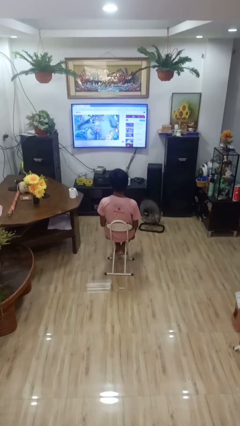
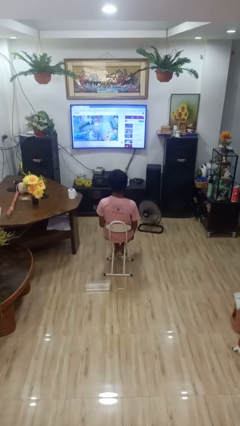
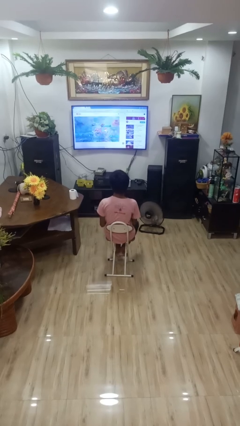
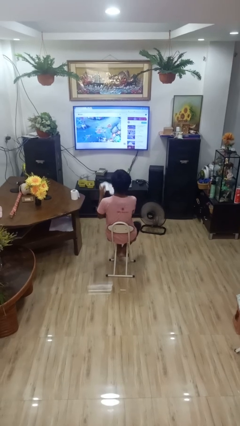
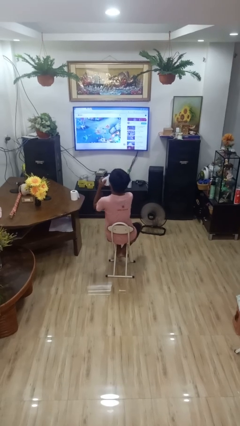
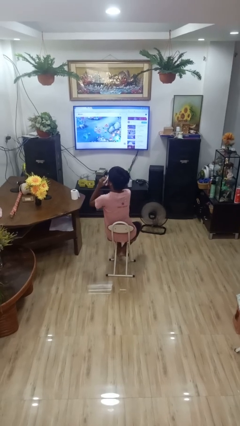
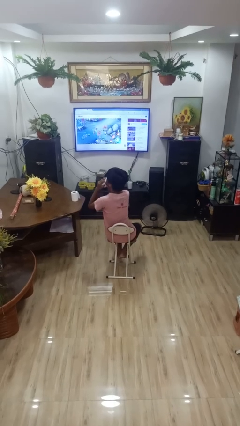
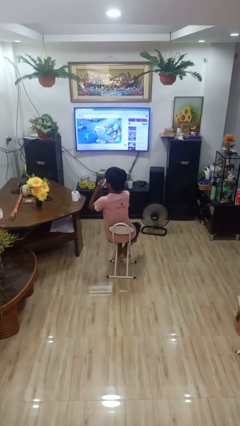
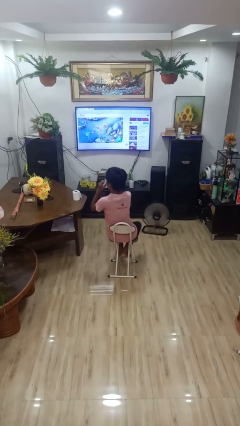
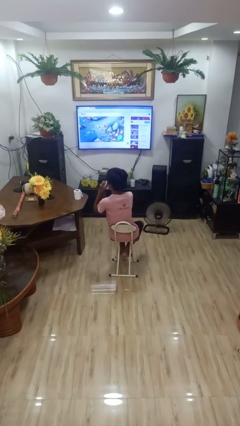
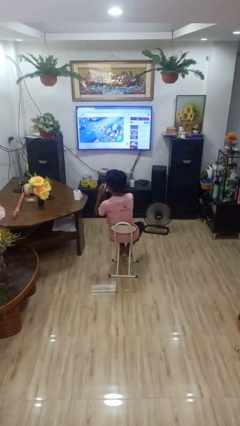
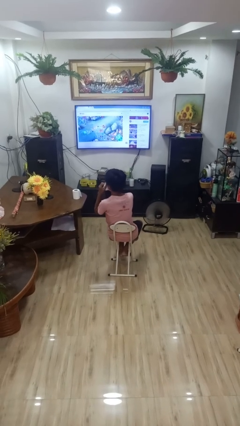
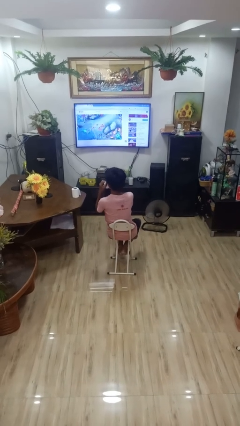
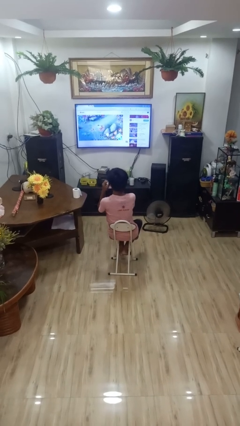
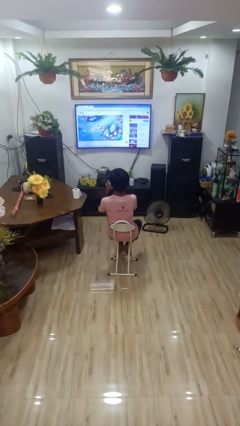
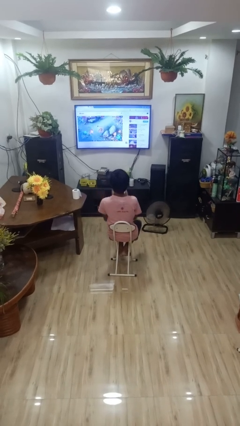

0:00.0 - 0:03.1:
person blows nose

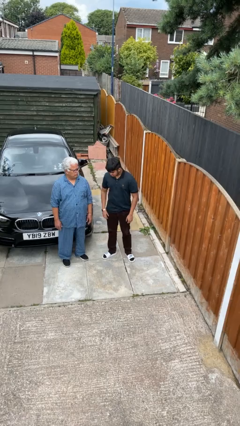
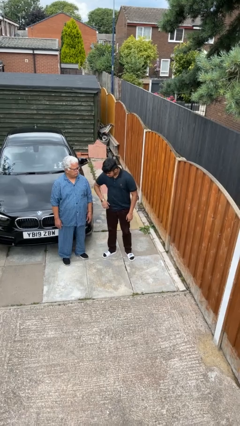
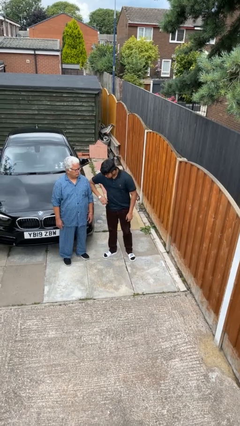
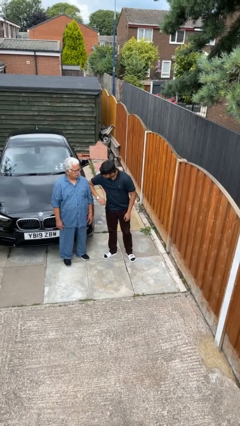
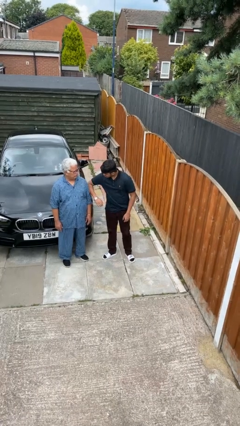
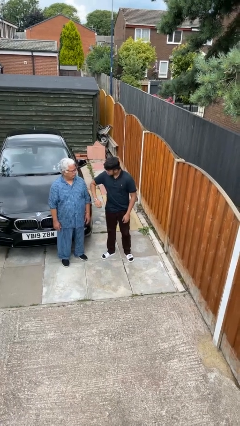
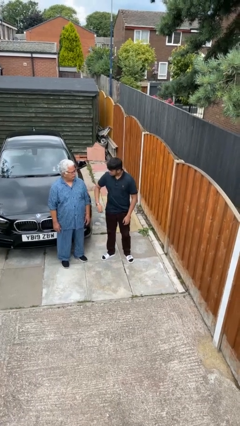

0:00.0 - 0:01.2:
person nudges person with elbow

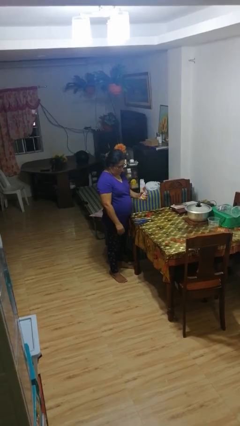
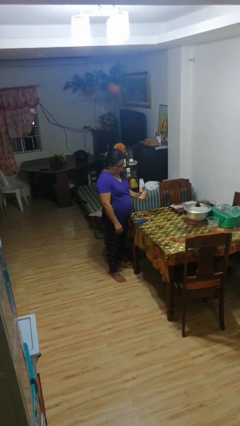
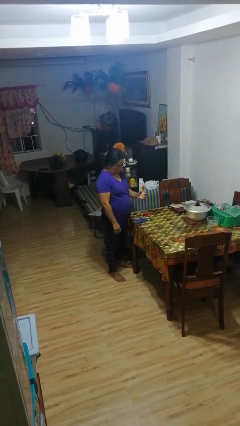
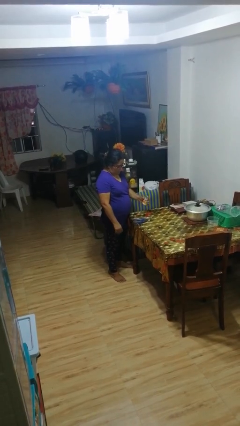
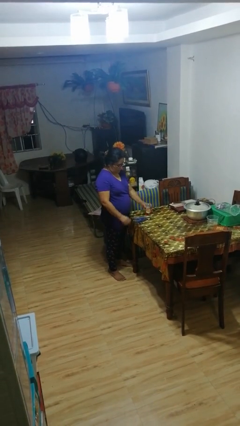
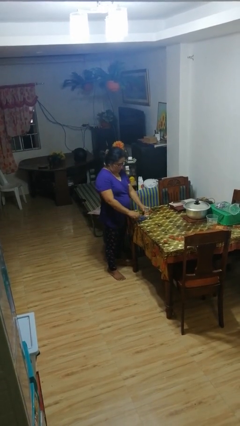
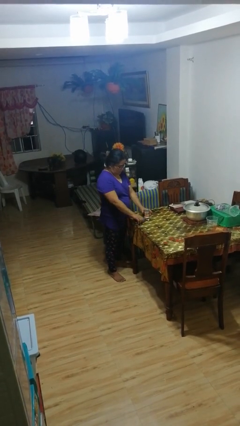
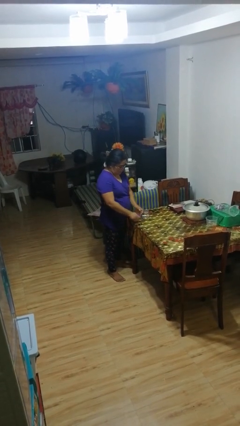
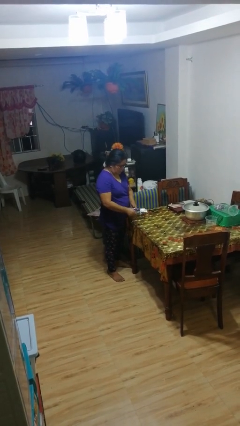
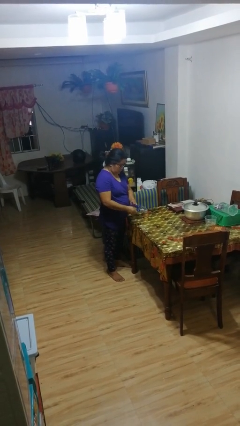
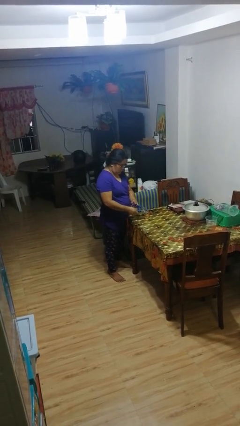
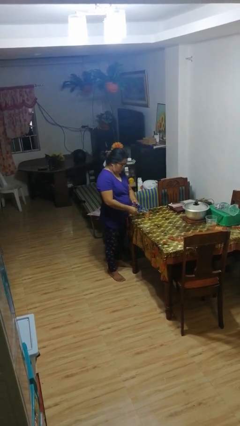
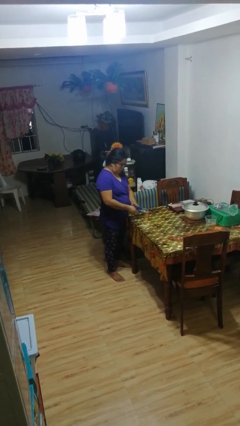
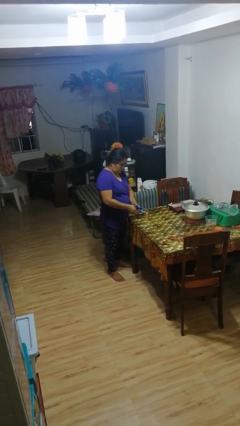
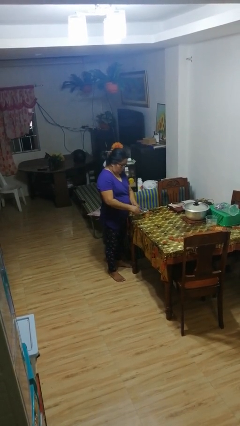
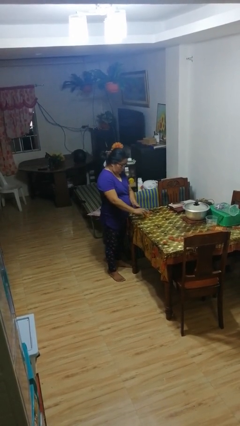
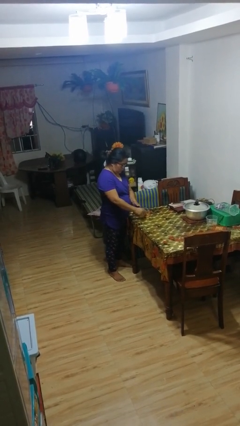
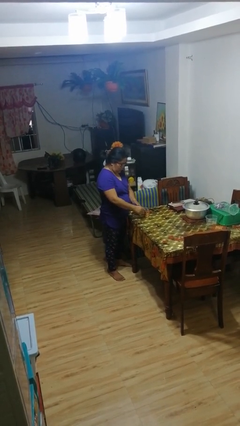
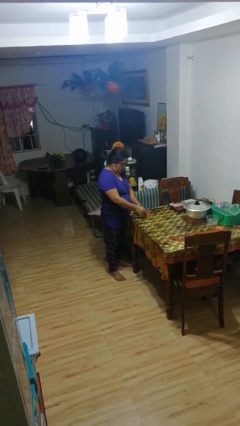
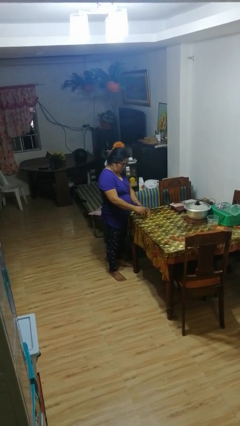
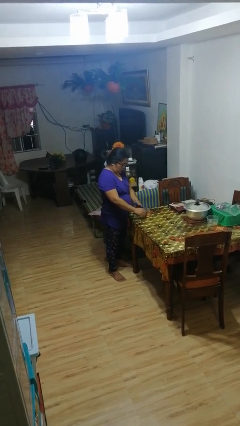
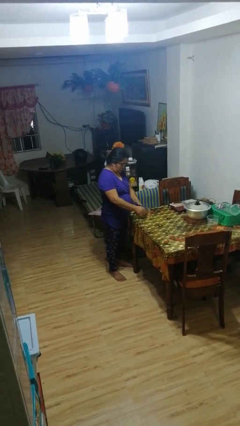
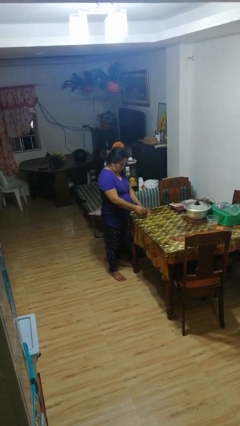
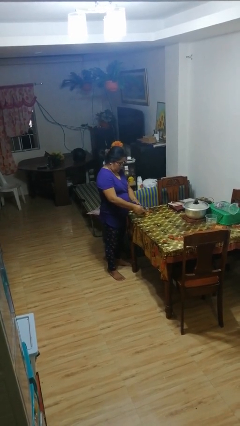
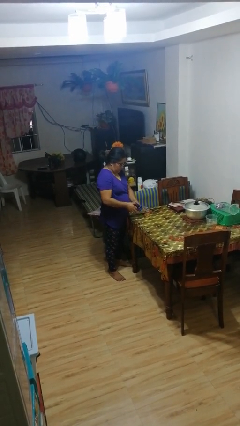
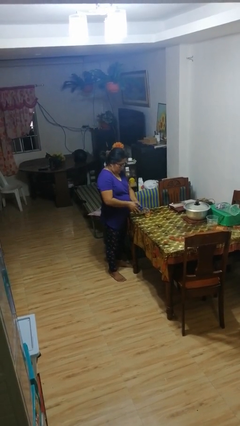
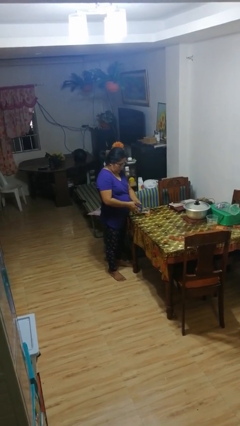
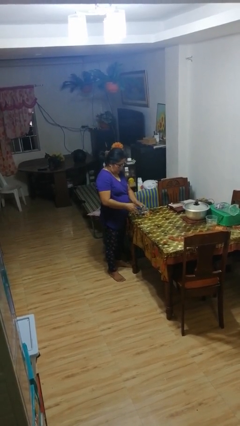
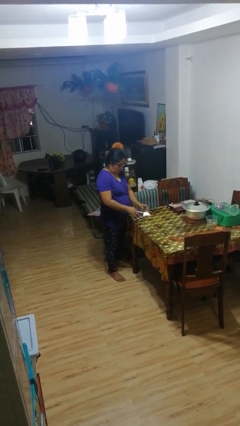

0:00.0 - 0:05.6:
person opens can with can opener

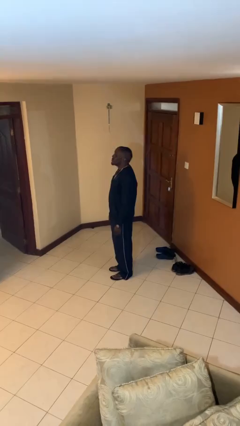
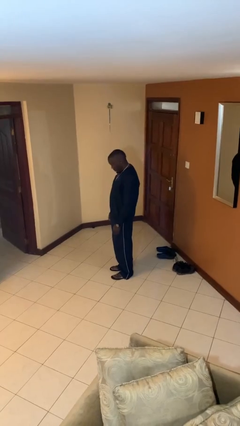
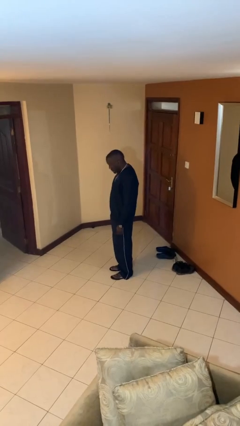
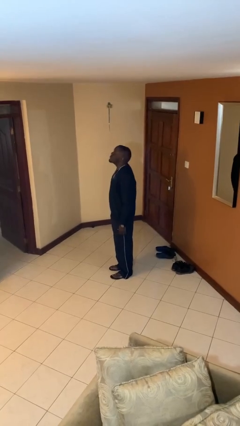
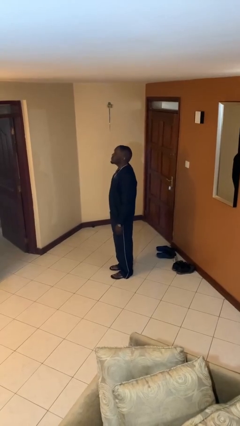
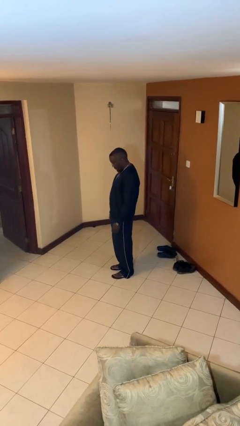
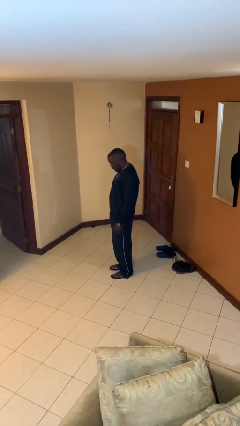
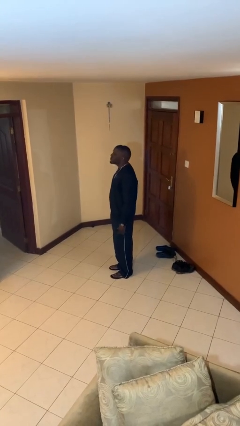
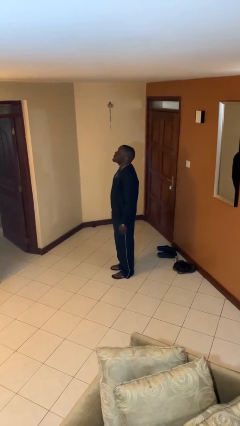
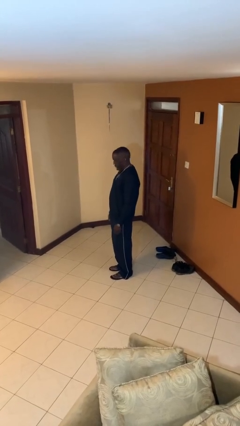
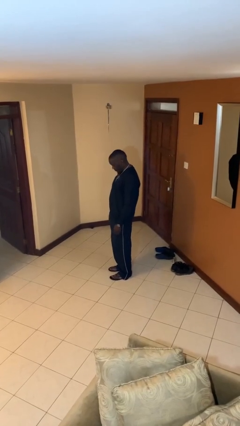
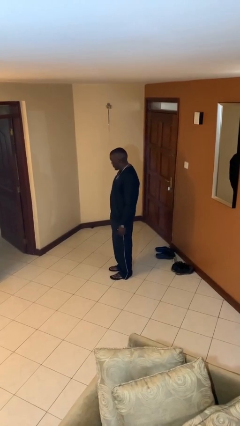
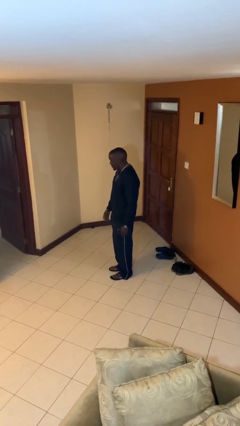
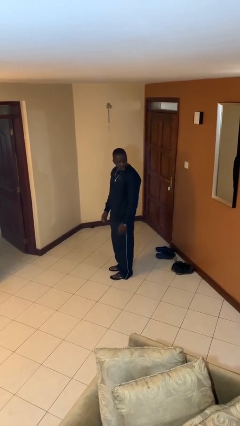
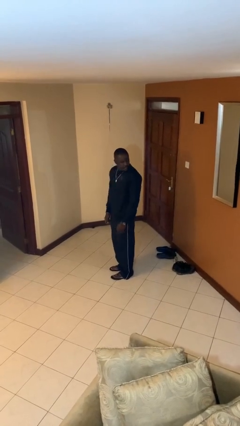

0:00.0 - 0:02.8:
person nods head

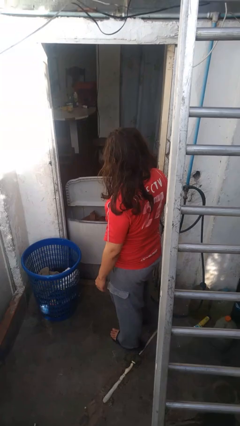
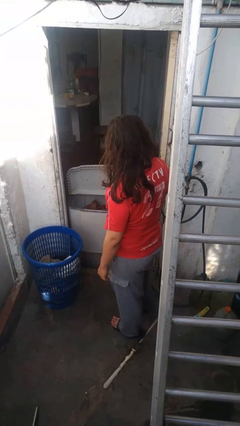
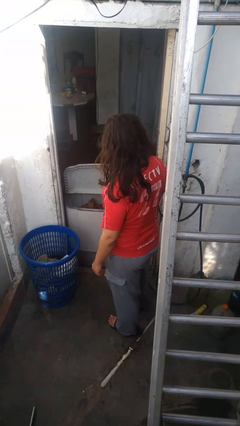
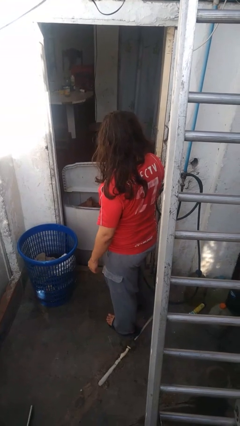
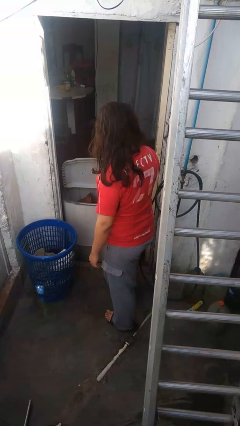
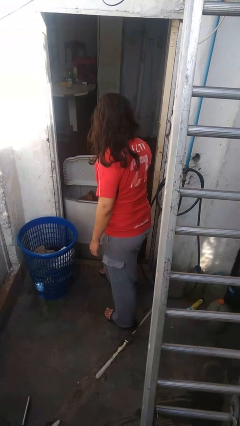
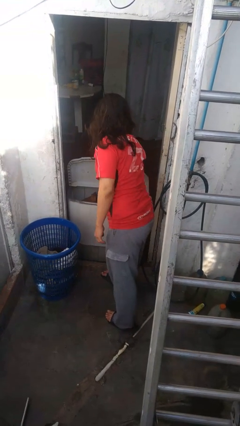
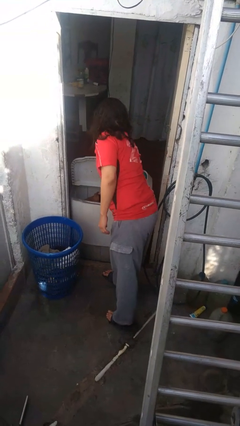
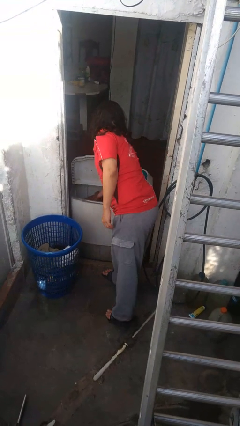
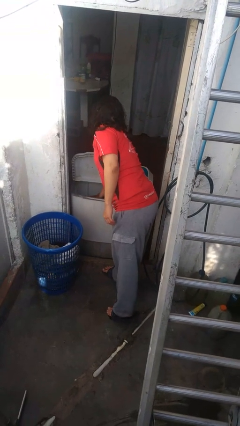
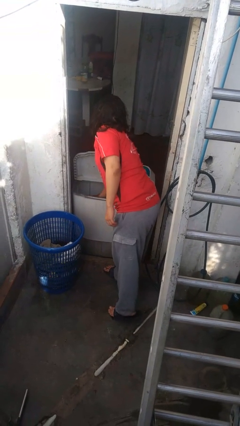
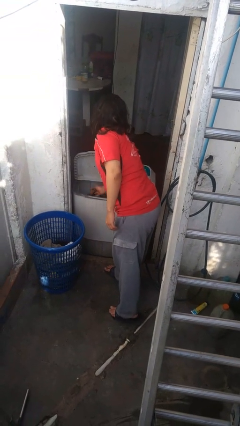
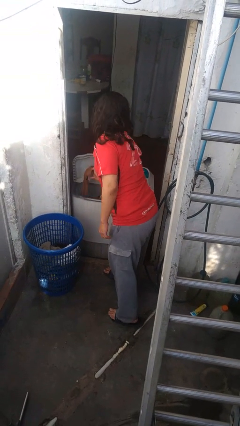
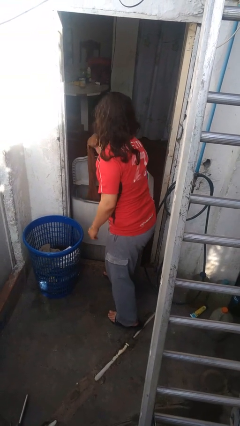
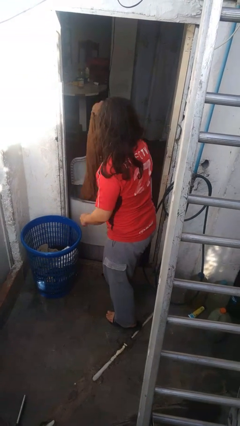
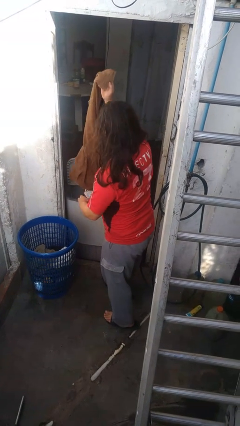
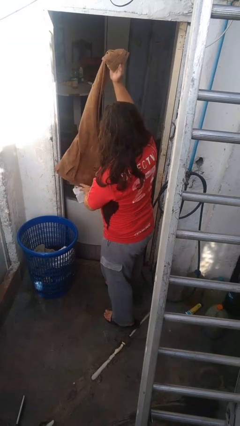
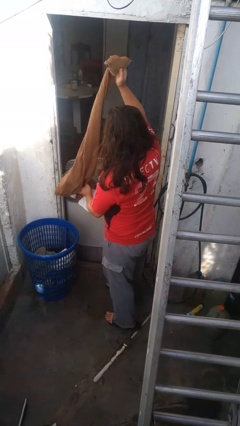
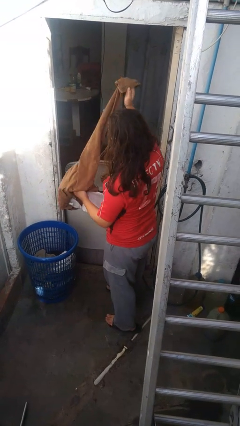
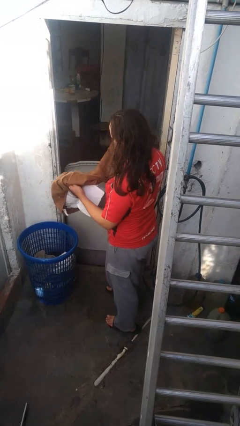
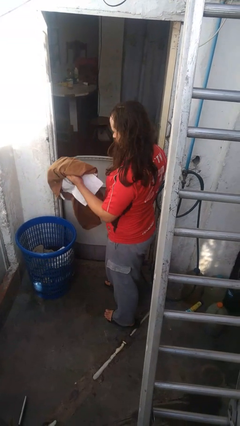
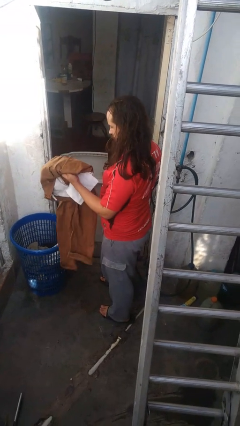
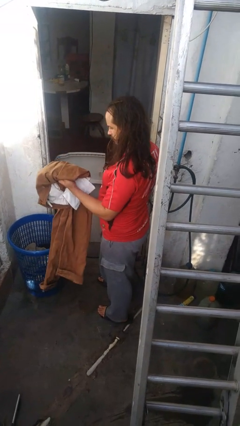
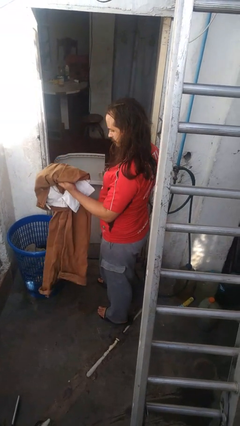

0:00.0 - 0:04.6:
person unloads clotheswasher

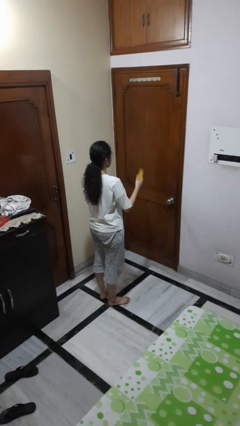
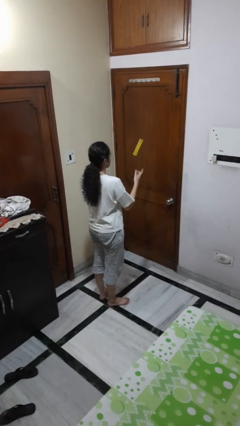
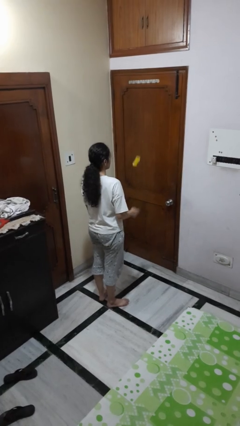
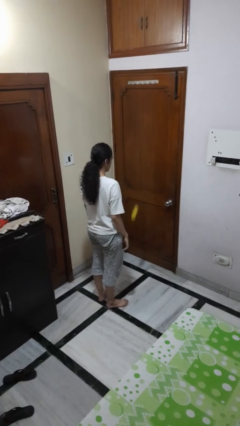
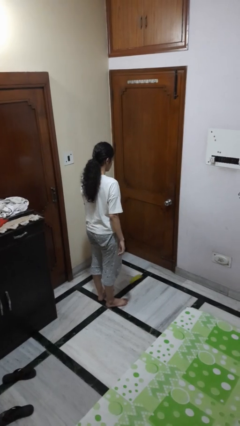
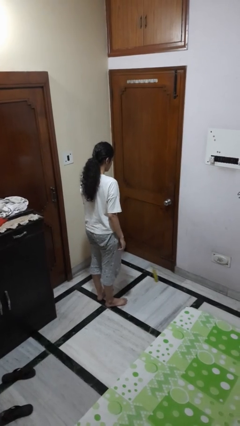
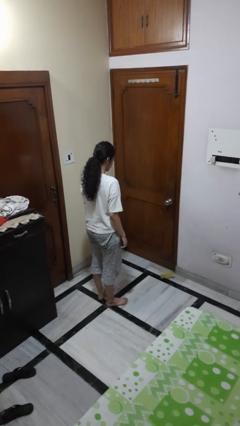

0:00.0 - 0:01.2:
person throws object into air
